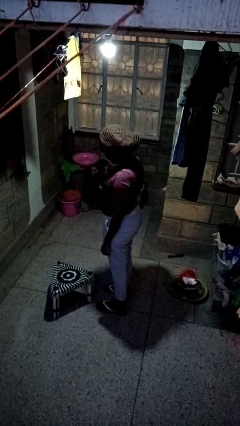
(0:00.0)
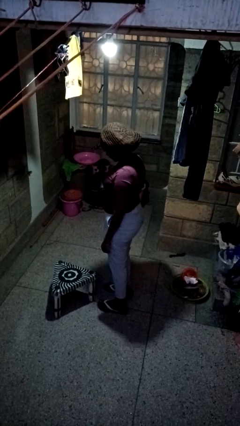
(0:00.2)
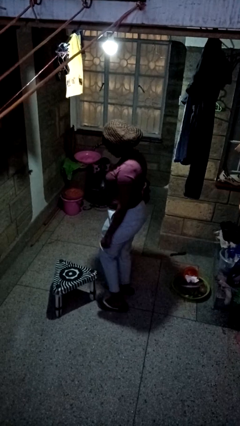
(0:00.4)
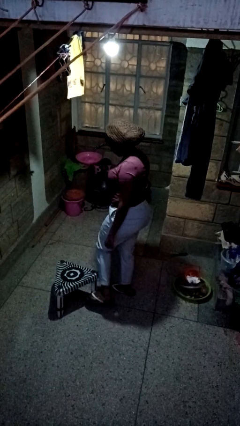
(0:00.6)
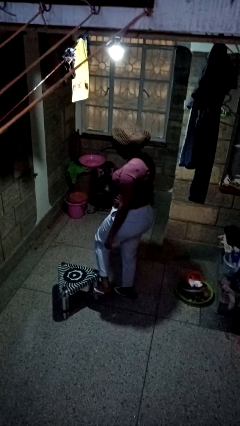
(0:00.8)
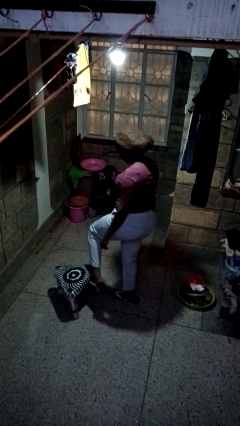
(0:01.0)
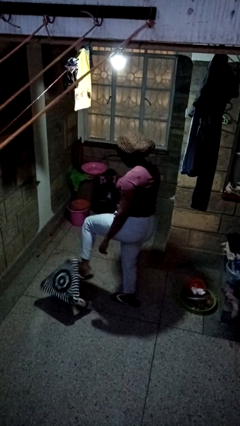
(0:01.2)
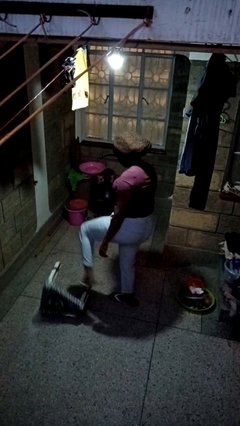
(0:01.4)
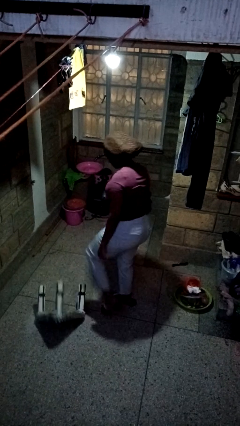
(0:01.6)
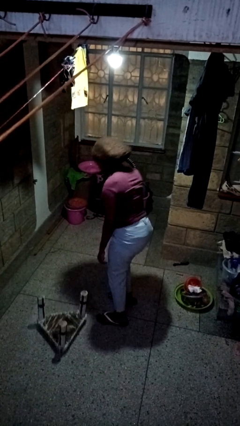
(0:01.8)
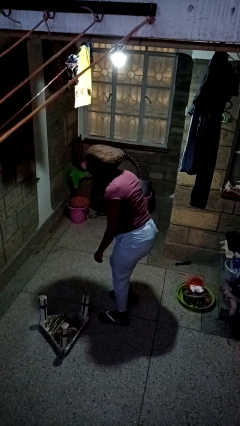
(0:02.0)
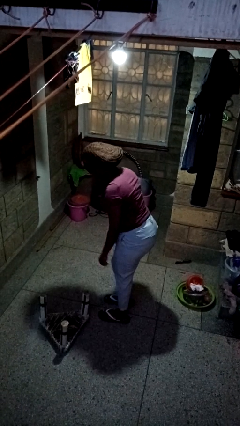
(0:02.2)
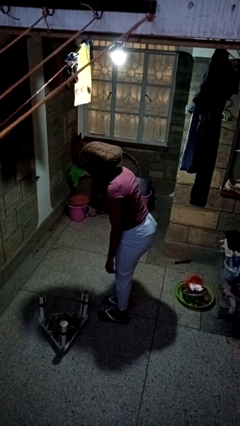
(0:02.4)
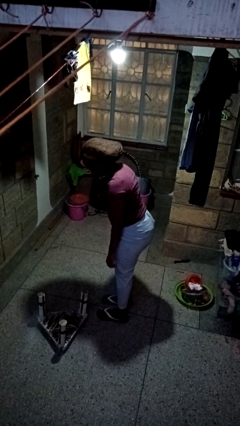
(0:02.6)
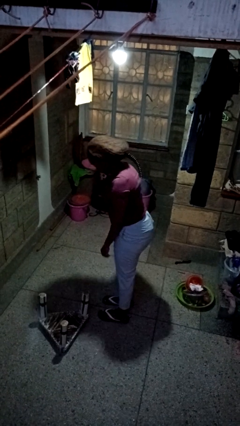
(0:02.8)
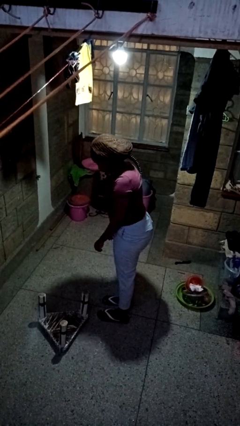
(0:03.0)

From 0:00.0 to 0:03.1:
person knocks over furniture

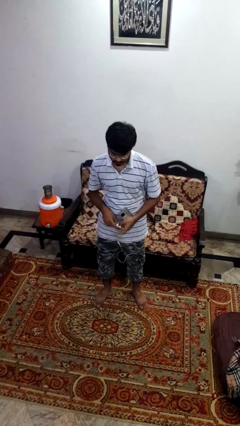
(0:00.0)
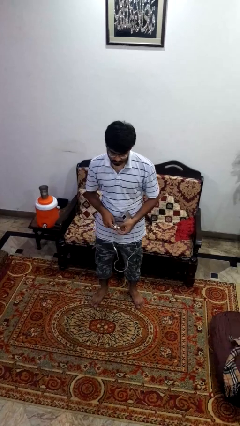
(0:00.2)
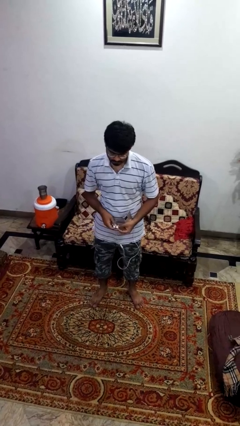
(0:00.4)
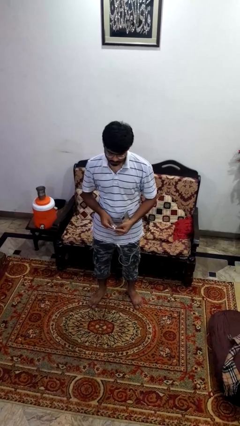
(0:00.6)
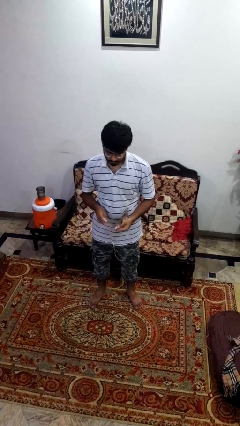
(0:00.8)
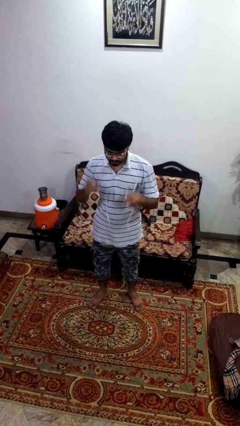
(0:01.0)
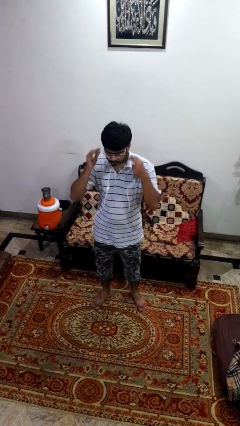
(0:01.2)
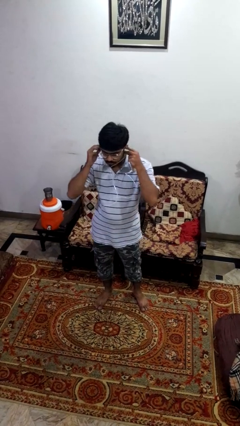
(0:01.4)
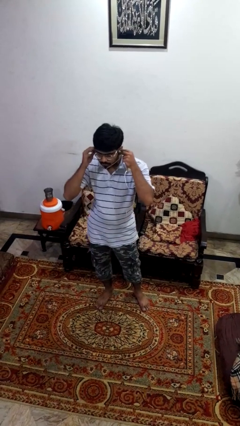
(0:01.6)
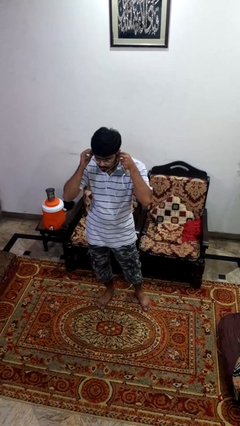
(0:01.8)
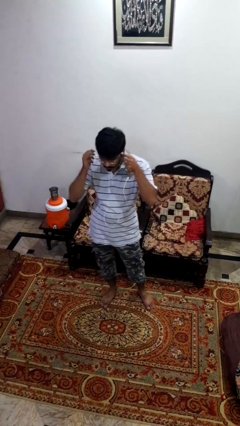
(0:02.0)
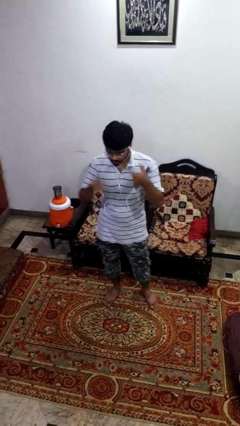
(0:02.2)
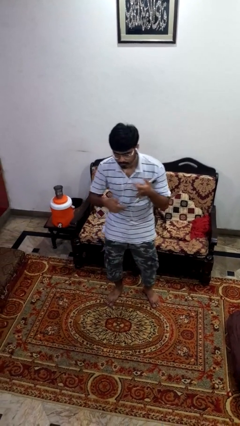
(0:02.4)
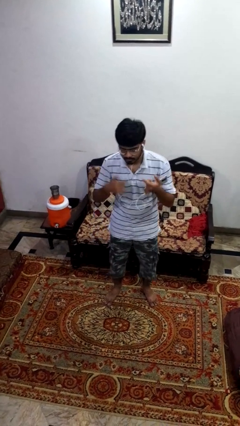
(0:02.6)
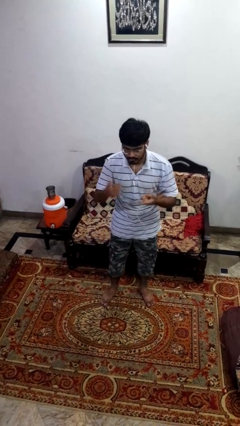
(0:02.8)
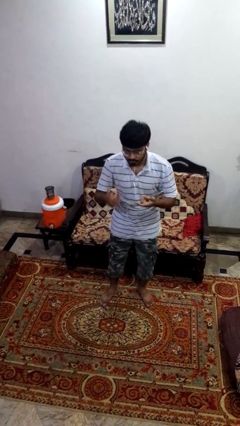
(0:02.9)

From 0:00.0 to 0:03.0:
person puts on headphones

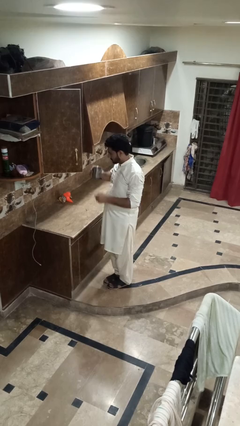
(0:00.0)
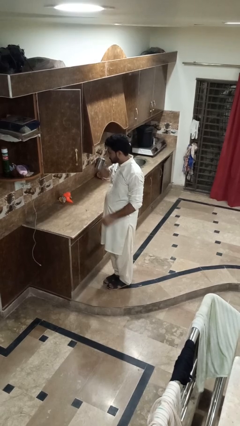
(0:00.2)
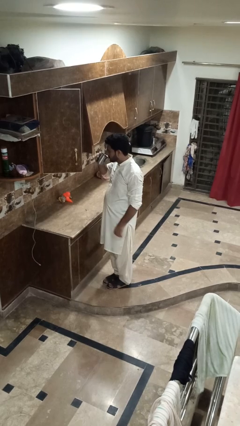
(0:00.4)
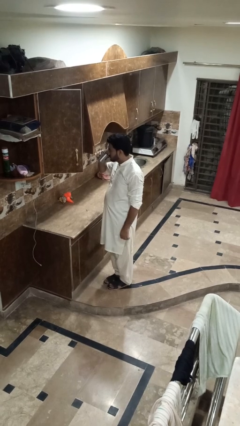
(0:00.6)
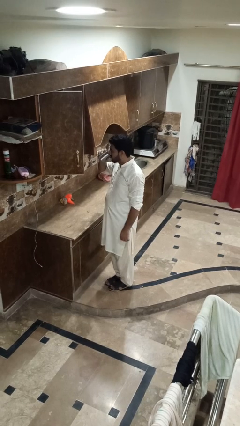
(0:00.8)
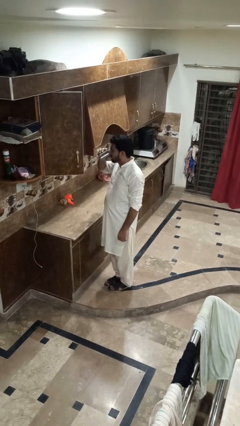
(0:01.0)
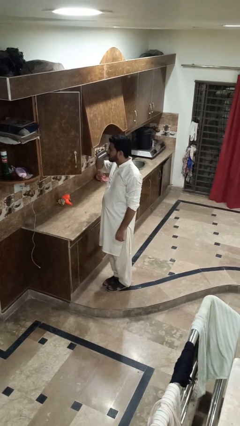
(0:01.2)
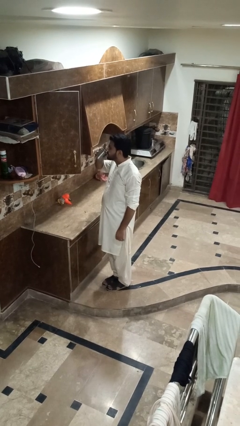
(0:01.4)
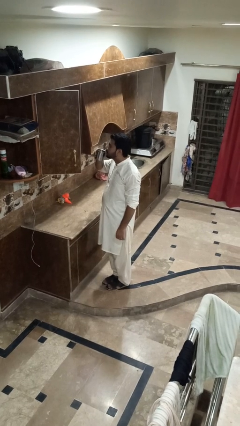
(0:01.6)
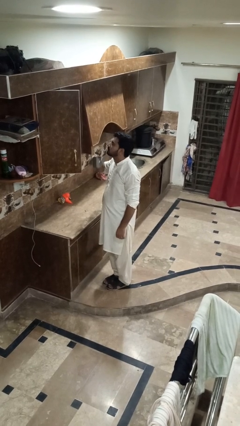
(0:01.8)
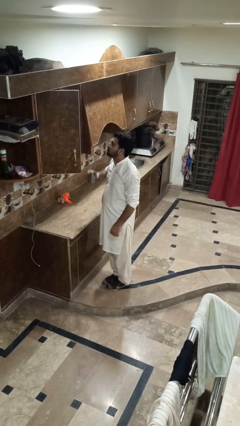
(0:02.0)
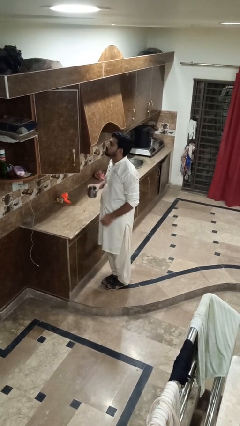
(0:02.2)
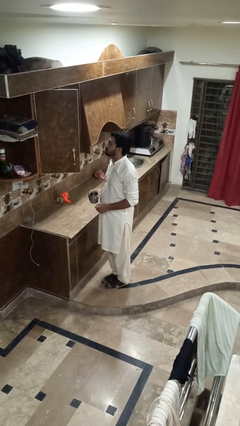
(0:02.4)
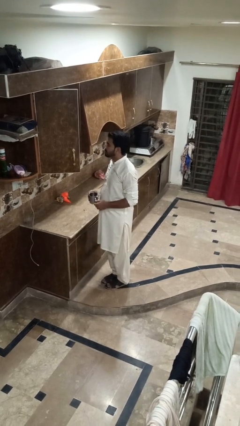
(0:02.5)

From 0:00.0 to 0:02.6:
person drinks from cup

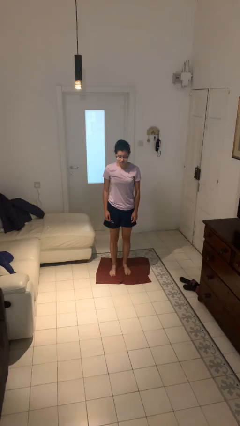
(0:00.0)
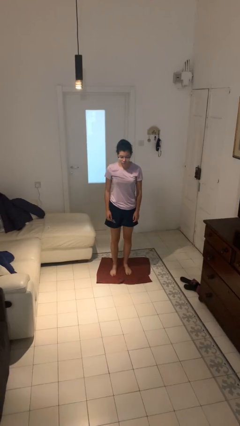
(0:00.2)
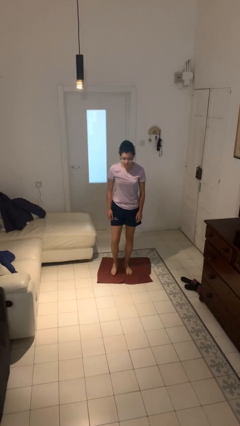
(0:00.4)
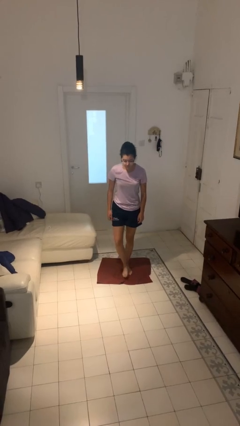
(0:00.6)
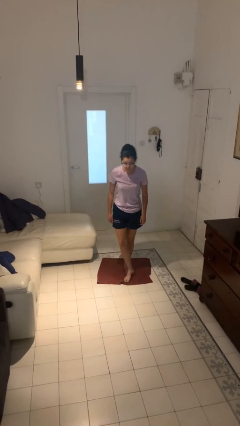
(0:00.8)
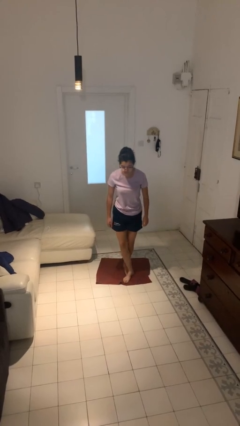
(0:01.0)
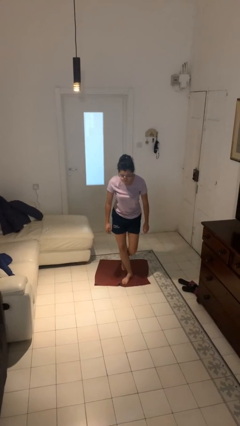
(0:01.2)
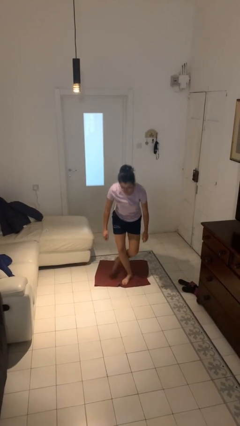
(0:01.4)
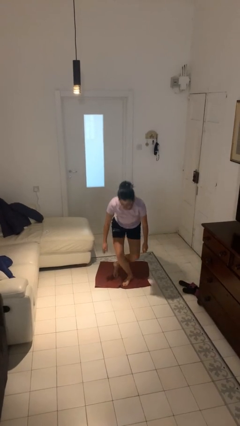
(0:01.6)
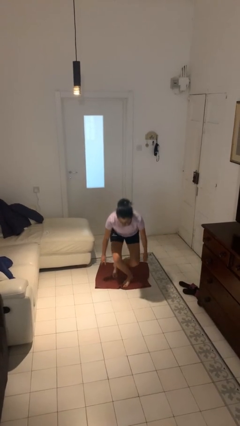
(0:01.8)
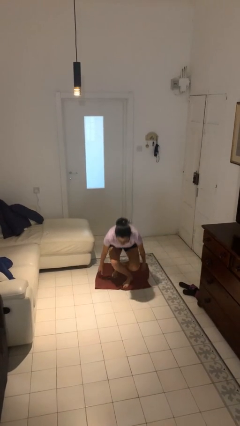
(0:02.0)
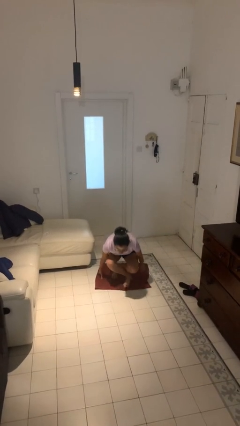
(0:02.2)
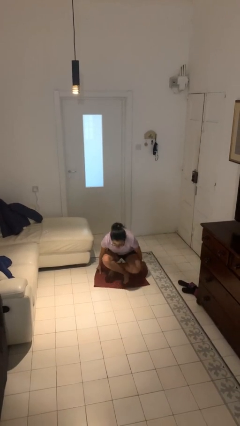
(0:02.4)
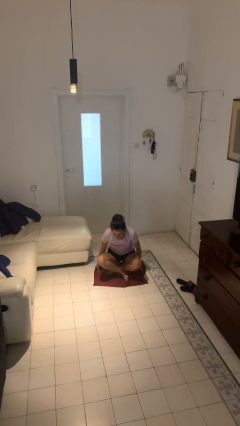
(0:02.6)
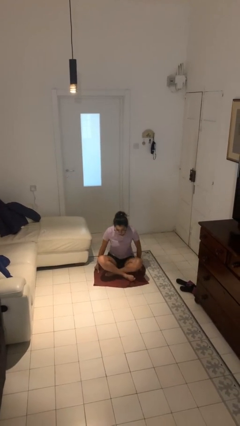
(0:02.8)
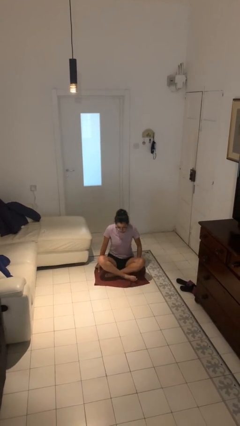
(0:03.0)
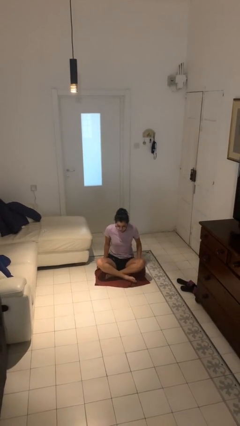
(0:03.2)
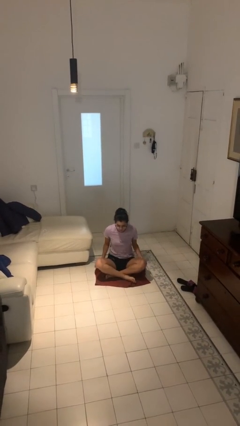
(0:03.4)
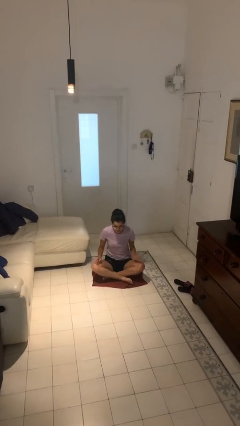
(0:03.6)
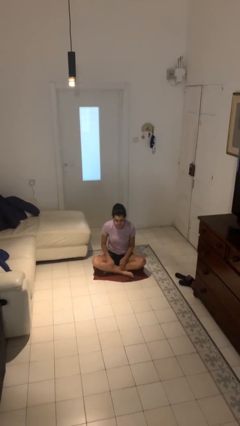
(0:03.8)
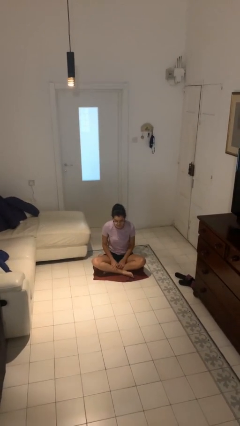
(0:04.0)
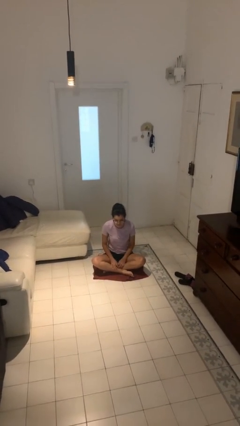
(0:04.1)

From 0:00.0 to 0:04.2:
person sits crisscross

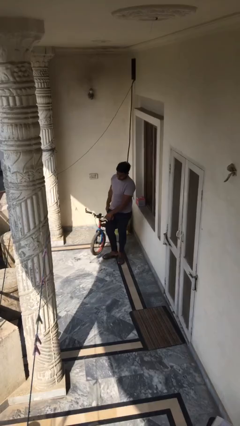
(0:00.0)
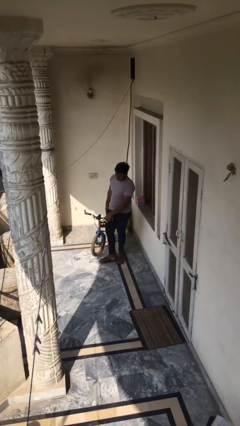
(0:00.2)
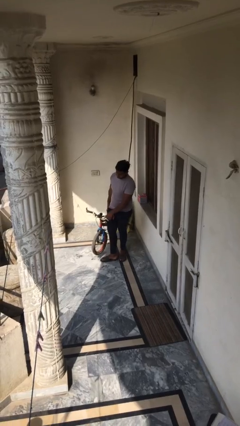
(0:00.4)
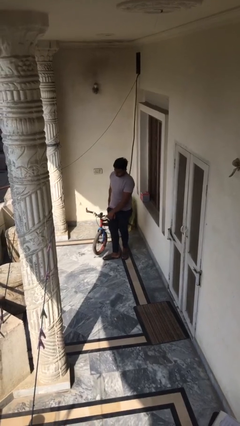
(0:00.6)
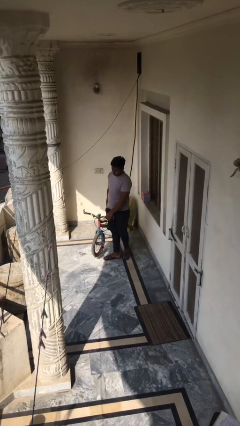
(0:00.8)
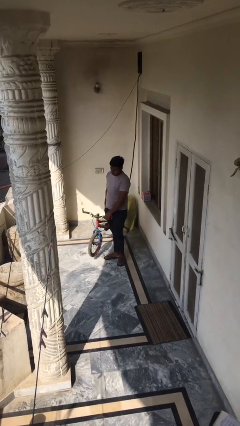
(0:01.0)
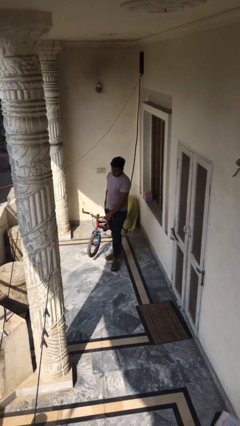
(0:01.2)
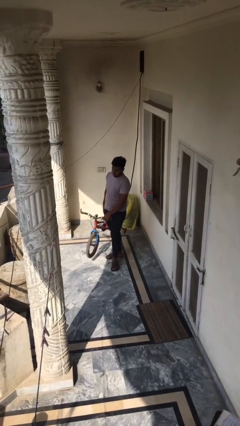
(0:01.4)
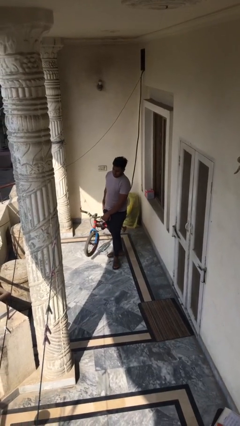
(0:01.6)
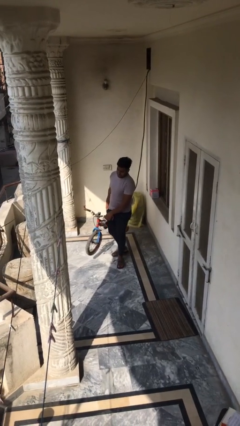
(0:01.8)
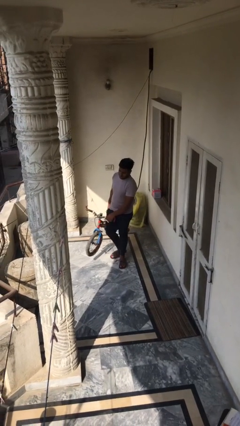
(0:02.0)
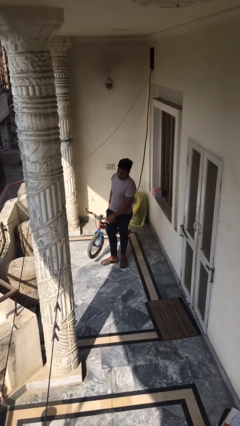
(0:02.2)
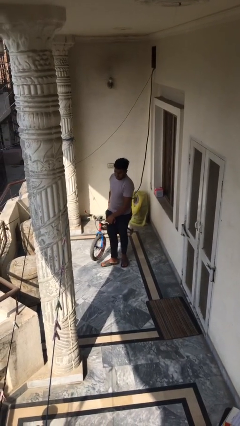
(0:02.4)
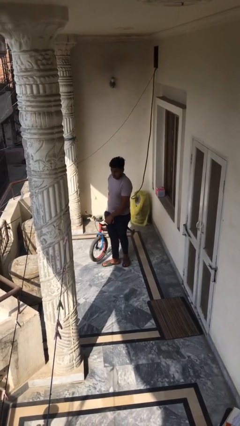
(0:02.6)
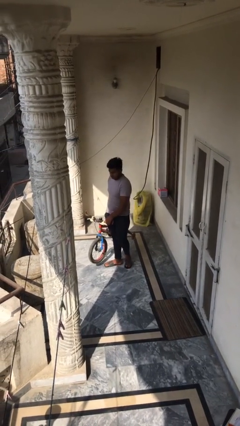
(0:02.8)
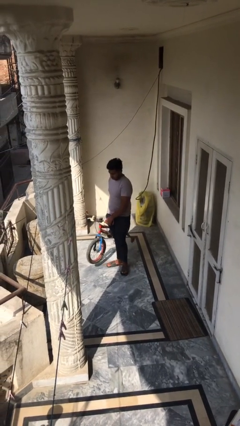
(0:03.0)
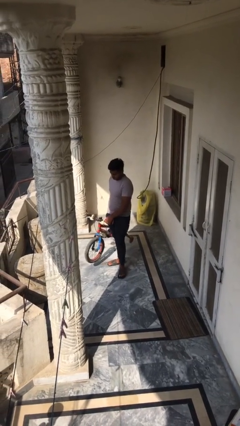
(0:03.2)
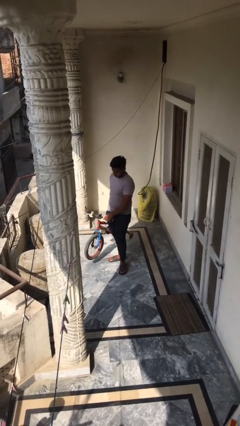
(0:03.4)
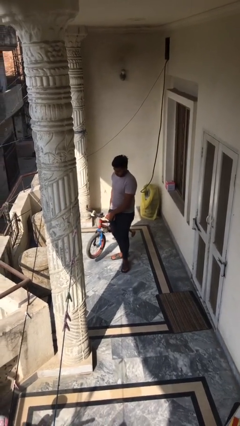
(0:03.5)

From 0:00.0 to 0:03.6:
person carries heavy object

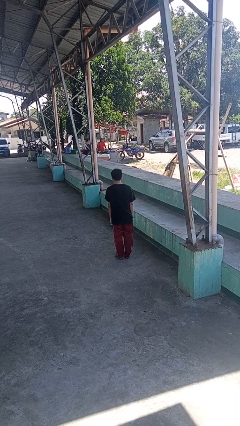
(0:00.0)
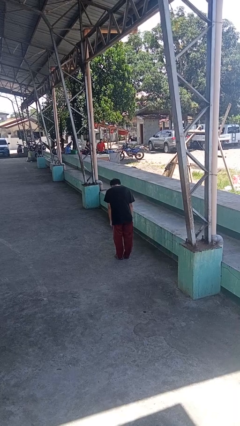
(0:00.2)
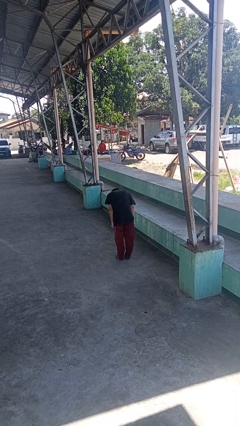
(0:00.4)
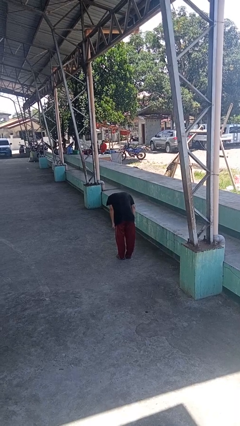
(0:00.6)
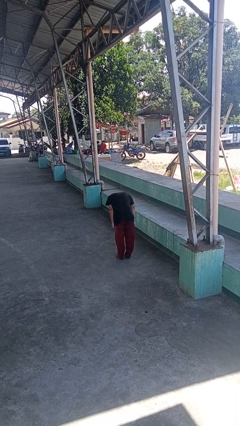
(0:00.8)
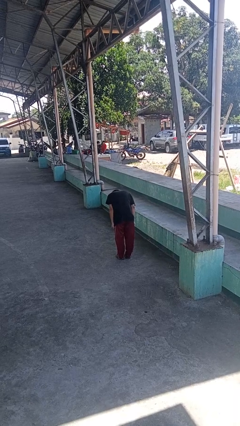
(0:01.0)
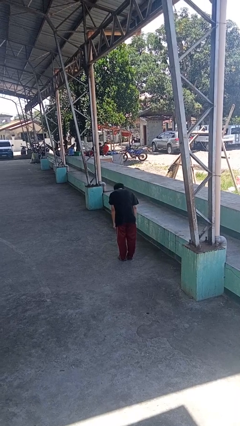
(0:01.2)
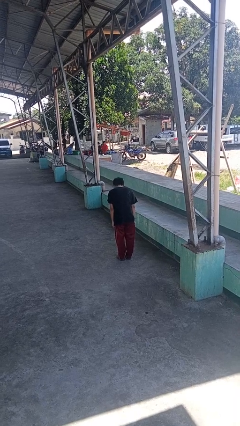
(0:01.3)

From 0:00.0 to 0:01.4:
person bows
